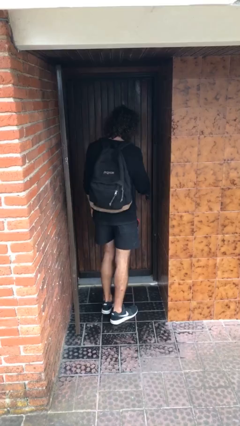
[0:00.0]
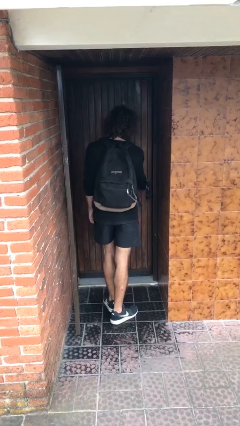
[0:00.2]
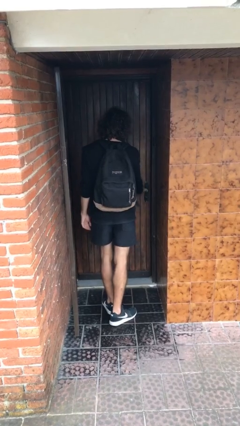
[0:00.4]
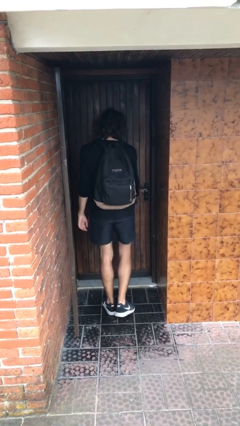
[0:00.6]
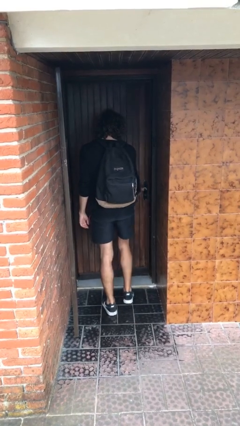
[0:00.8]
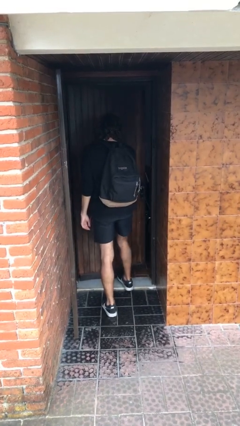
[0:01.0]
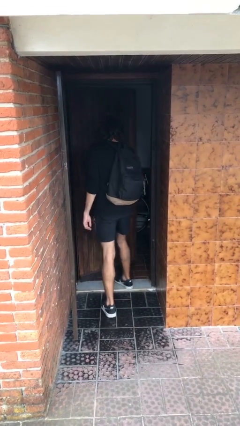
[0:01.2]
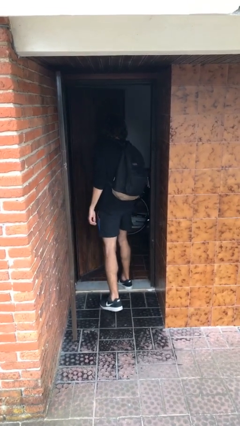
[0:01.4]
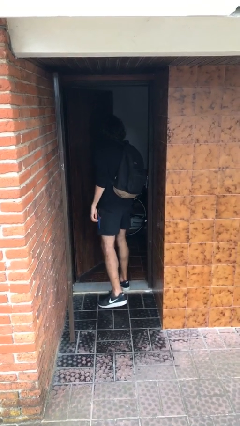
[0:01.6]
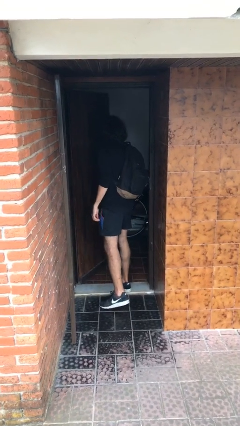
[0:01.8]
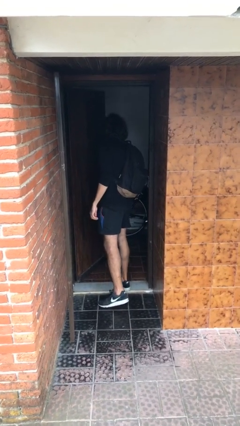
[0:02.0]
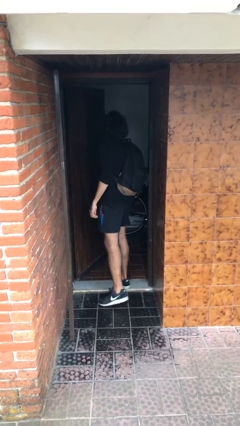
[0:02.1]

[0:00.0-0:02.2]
person opens facility door

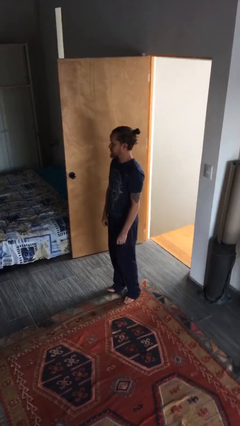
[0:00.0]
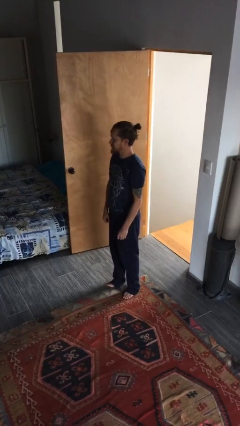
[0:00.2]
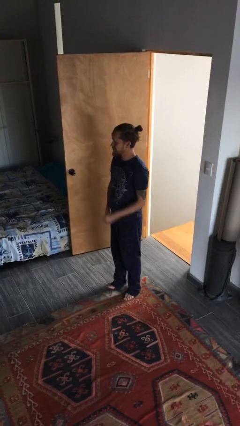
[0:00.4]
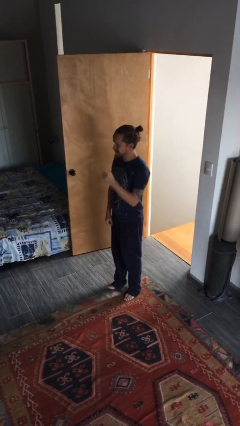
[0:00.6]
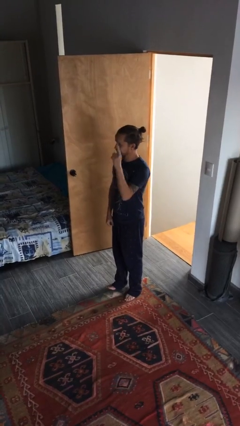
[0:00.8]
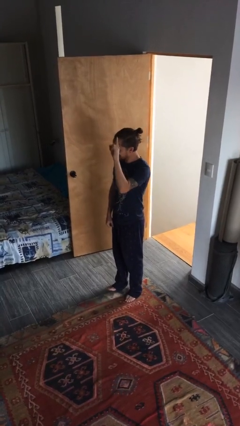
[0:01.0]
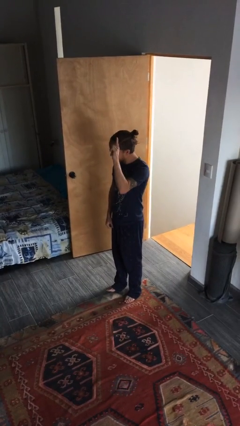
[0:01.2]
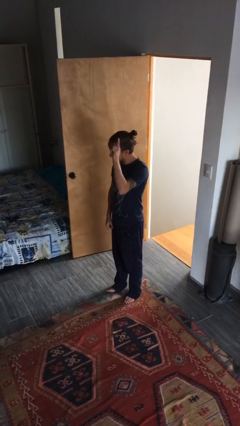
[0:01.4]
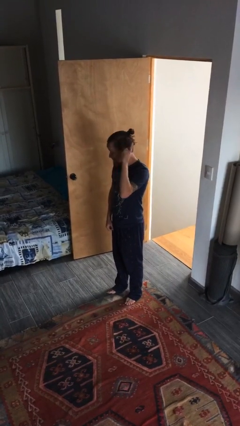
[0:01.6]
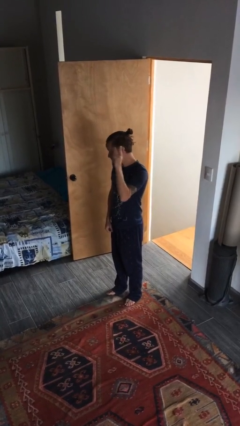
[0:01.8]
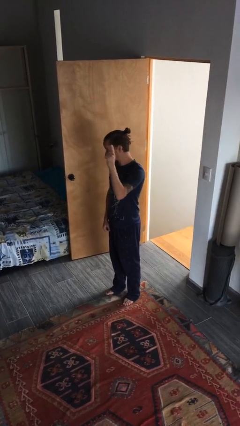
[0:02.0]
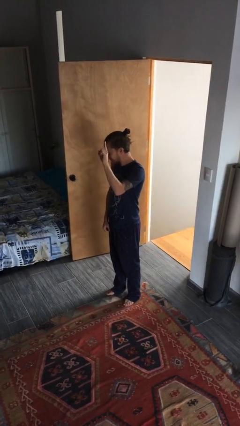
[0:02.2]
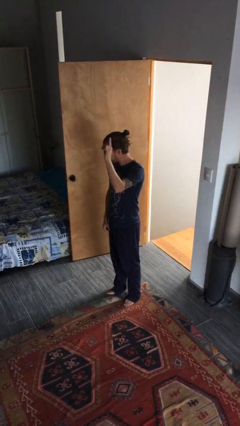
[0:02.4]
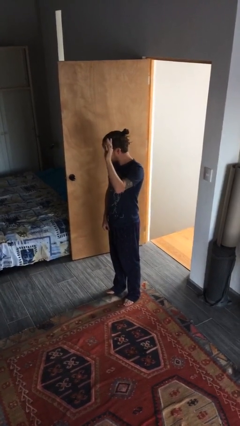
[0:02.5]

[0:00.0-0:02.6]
person gestures raise hand

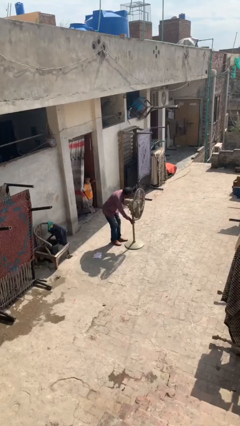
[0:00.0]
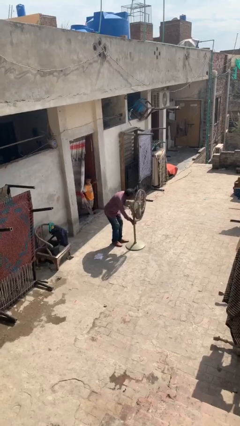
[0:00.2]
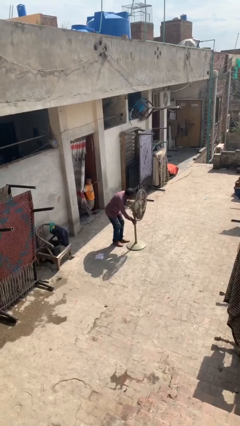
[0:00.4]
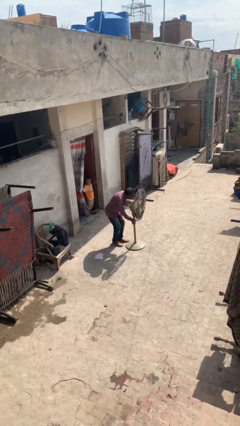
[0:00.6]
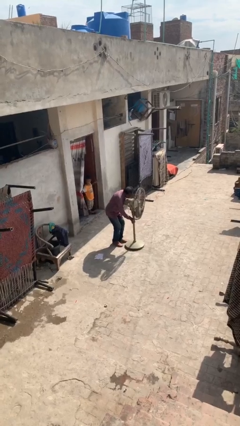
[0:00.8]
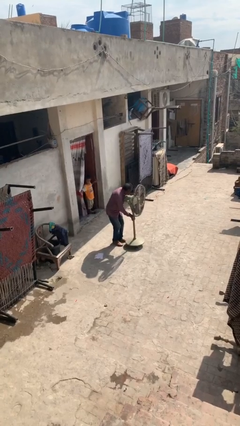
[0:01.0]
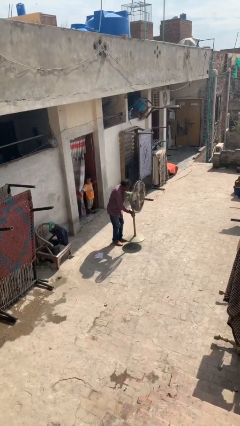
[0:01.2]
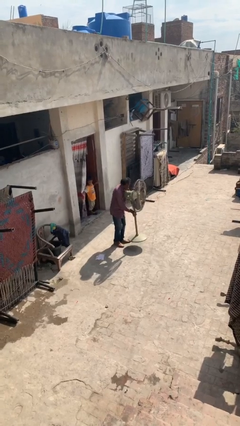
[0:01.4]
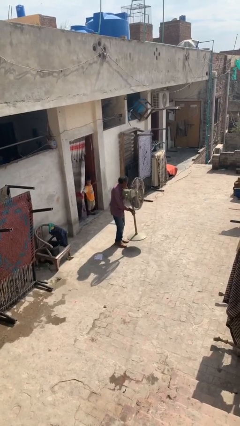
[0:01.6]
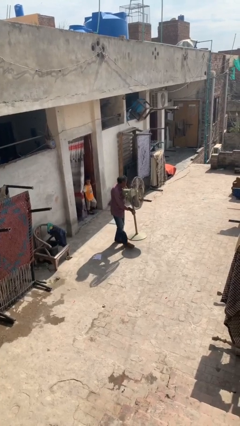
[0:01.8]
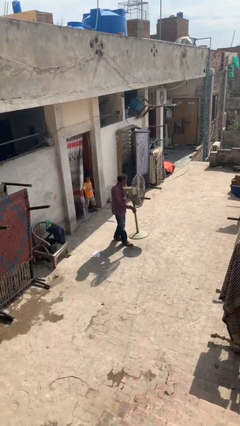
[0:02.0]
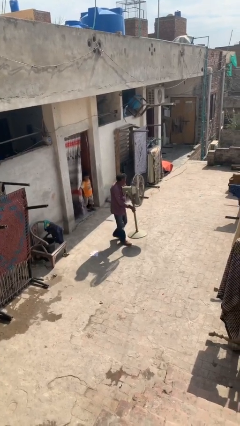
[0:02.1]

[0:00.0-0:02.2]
person picks up object from floor

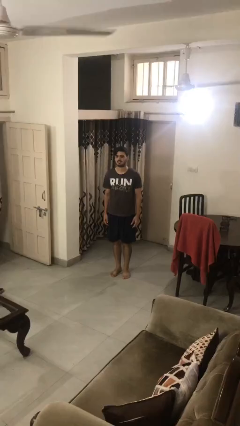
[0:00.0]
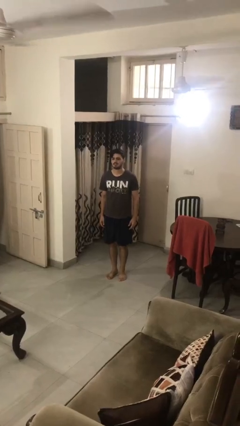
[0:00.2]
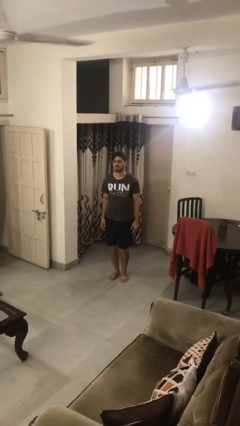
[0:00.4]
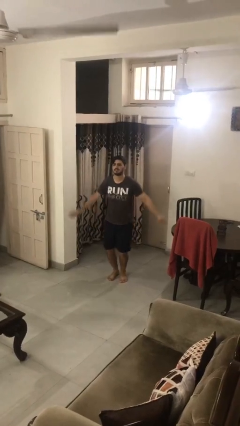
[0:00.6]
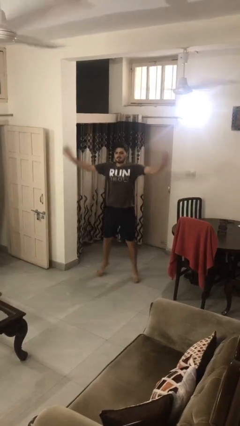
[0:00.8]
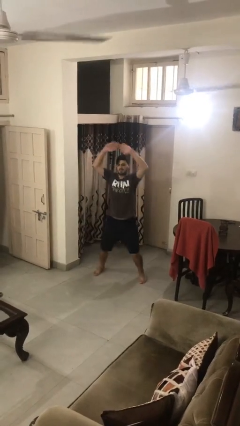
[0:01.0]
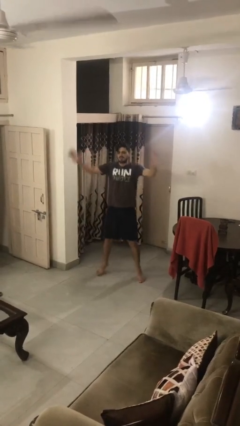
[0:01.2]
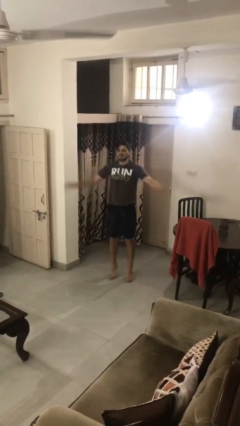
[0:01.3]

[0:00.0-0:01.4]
person exercises with jumping jacks

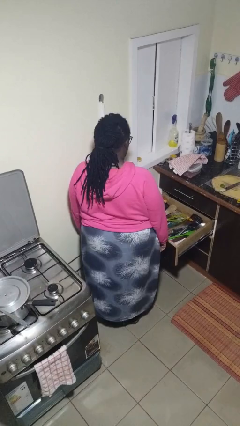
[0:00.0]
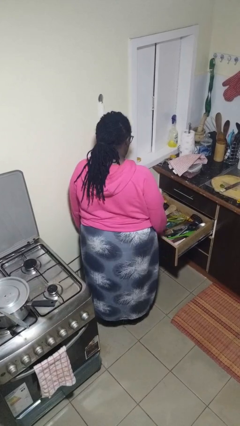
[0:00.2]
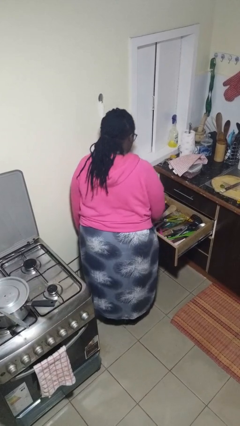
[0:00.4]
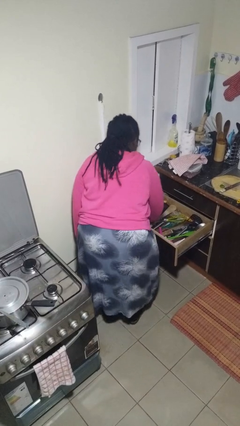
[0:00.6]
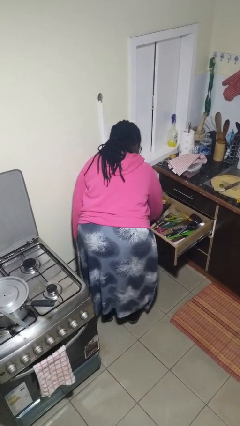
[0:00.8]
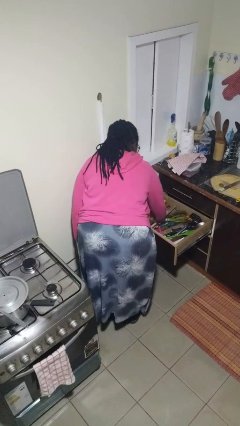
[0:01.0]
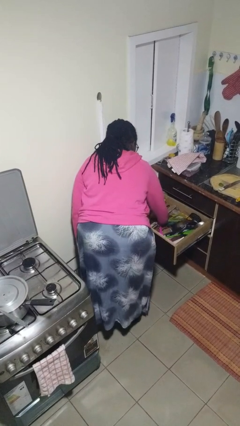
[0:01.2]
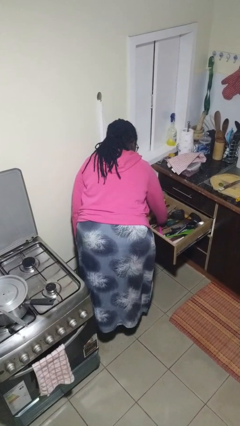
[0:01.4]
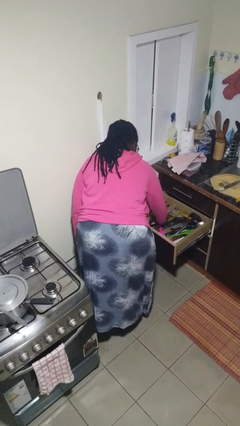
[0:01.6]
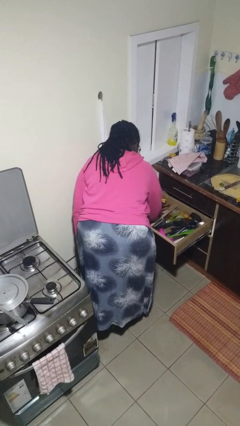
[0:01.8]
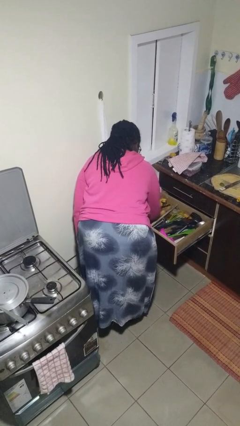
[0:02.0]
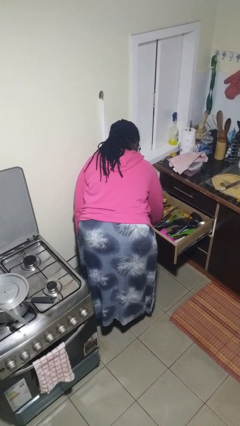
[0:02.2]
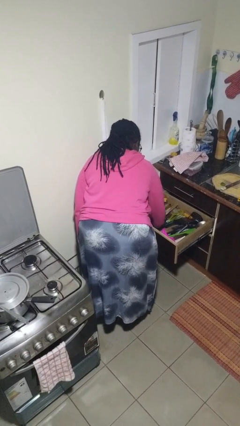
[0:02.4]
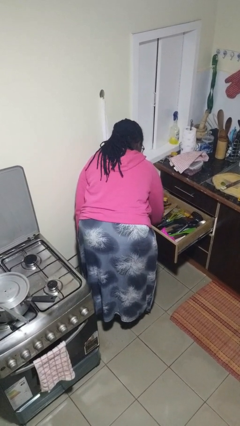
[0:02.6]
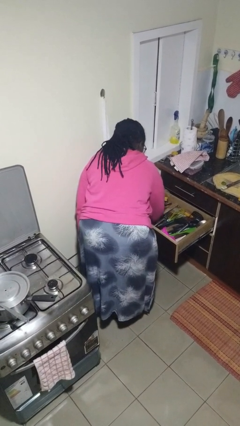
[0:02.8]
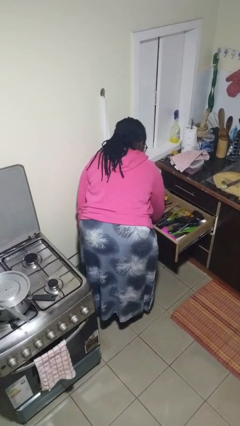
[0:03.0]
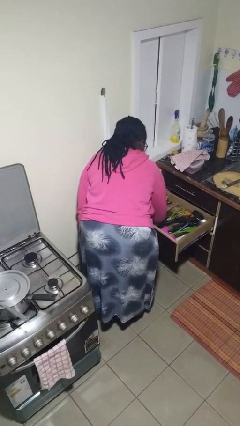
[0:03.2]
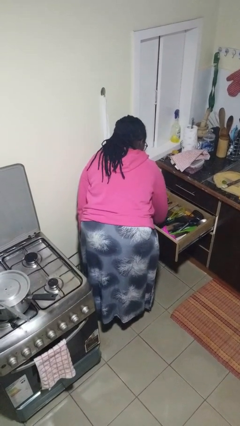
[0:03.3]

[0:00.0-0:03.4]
person searches in kitchen drawer

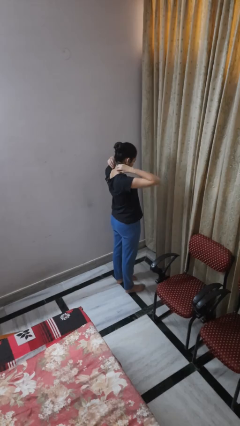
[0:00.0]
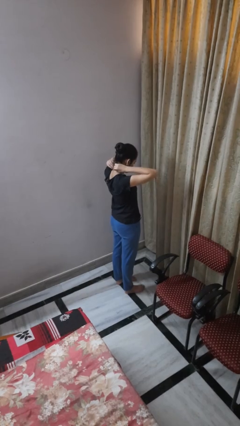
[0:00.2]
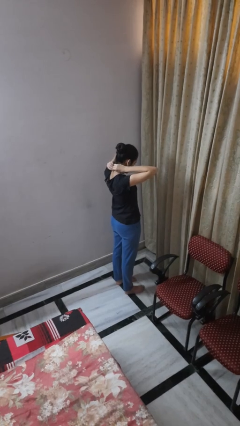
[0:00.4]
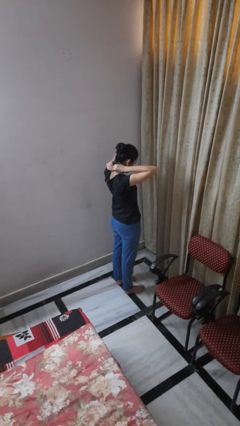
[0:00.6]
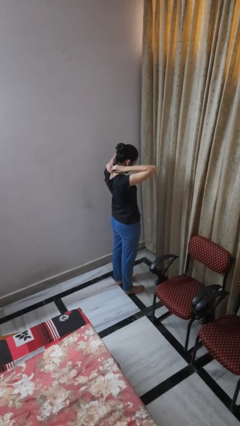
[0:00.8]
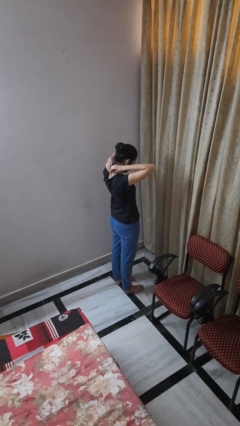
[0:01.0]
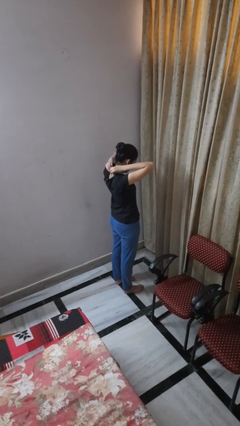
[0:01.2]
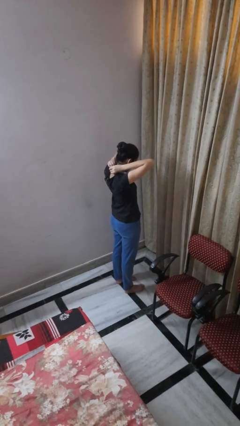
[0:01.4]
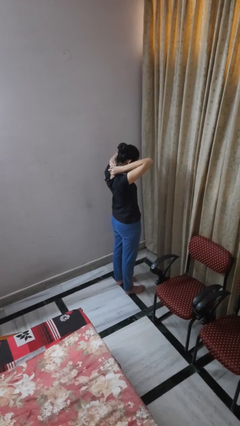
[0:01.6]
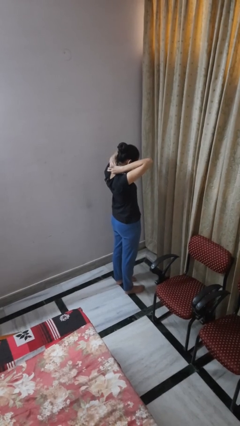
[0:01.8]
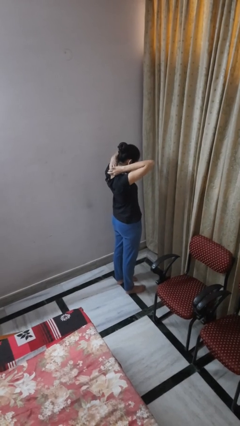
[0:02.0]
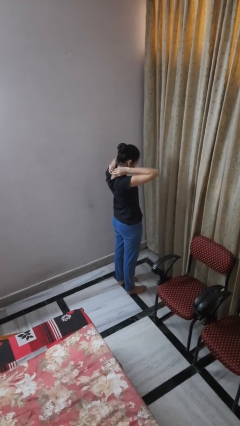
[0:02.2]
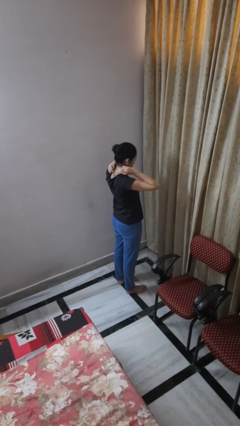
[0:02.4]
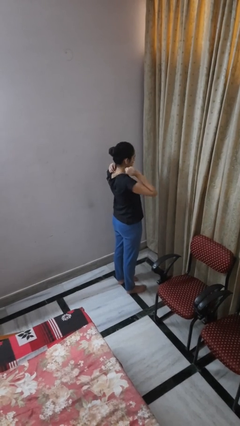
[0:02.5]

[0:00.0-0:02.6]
person puts on necklace

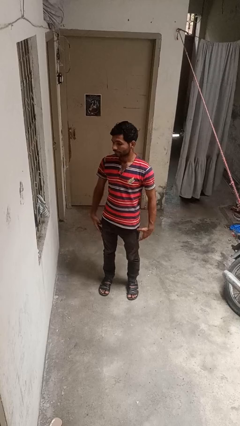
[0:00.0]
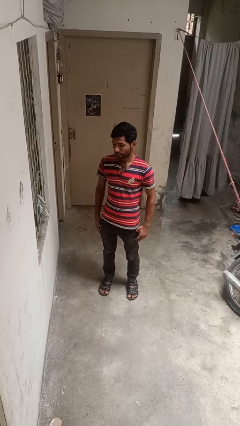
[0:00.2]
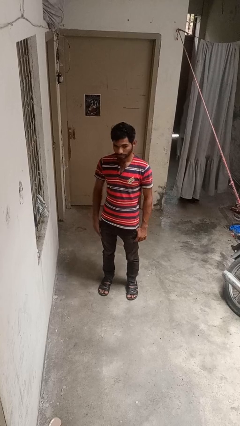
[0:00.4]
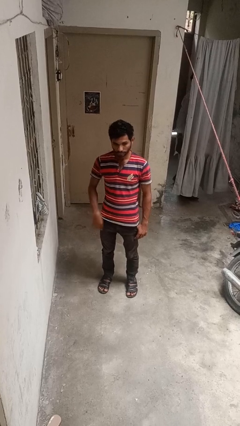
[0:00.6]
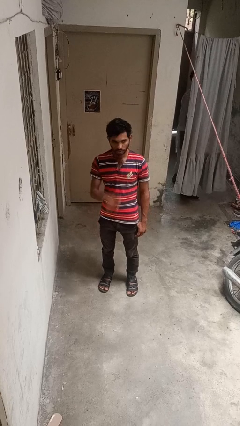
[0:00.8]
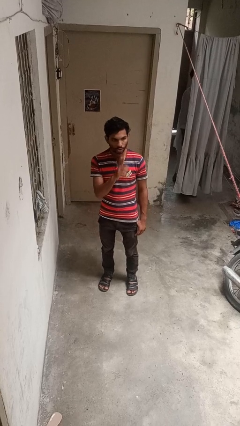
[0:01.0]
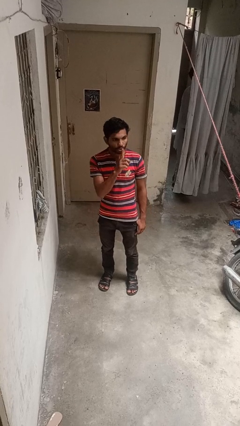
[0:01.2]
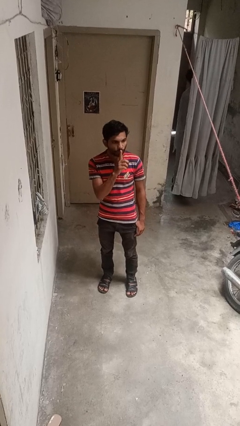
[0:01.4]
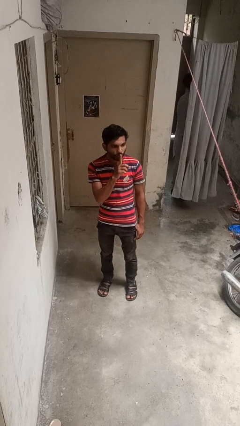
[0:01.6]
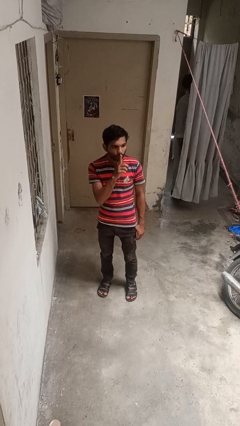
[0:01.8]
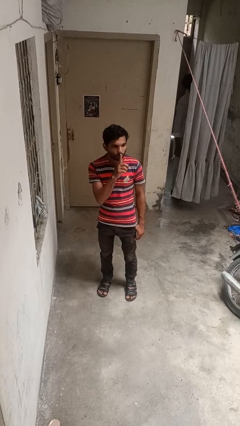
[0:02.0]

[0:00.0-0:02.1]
person gestures be quiet

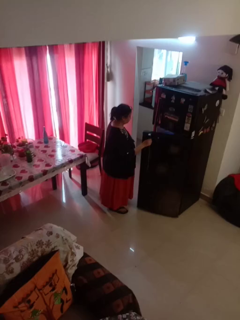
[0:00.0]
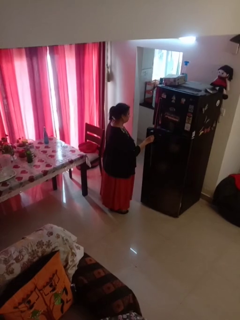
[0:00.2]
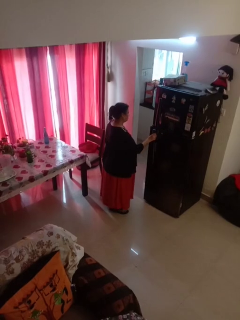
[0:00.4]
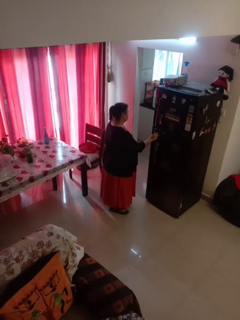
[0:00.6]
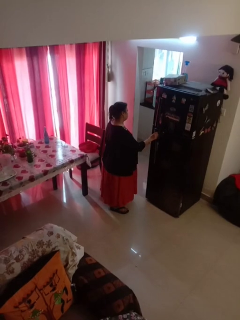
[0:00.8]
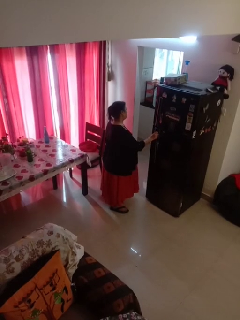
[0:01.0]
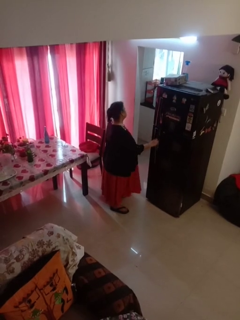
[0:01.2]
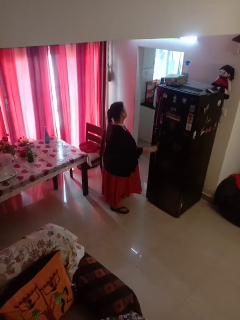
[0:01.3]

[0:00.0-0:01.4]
person closes refrigerator
